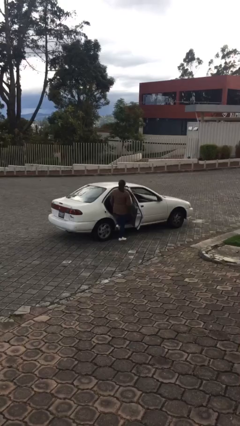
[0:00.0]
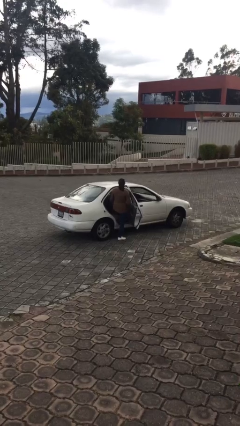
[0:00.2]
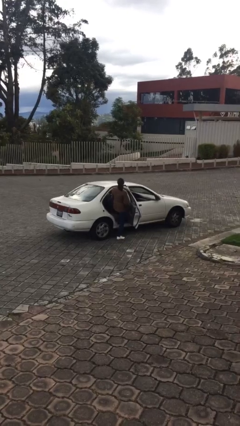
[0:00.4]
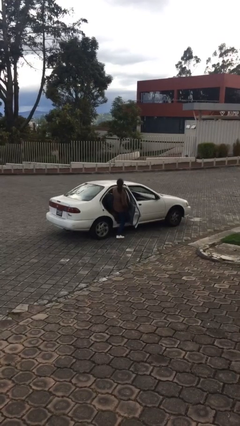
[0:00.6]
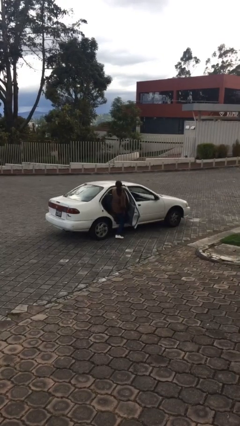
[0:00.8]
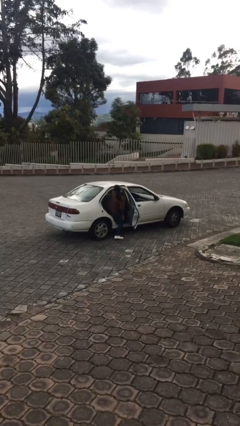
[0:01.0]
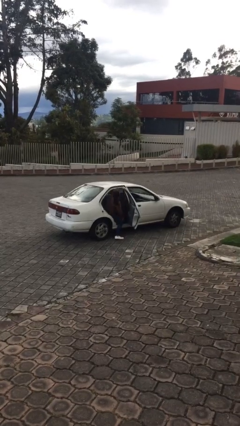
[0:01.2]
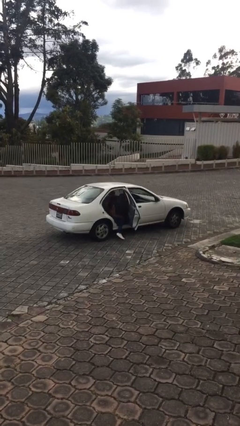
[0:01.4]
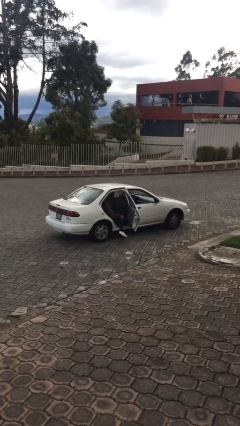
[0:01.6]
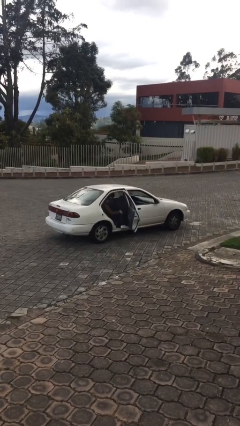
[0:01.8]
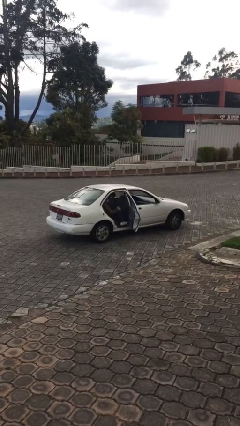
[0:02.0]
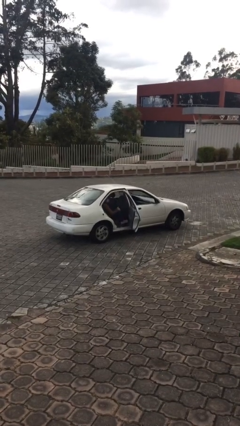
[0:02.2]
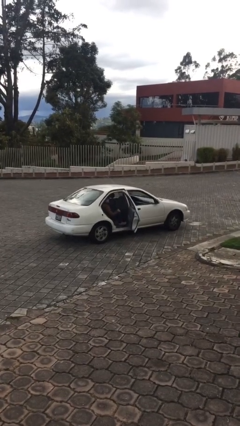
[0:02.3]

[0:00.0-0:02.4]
person enters car

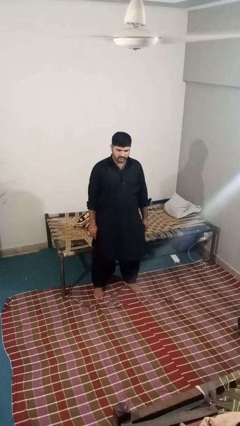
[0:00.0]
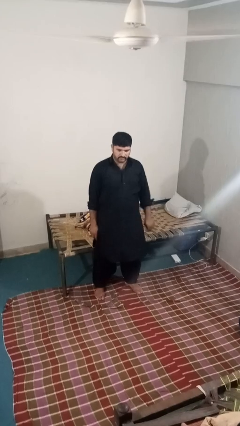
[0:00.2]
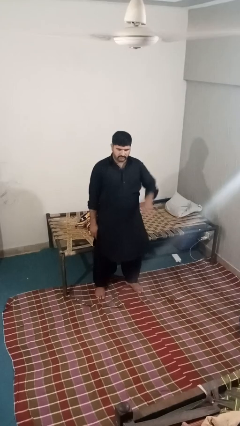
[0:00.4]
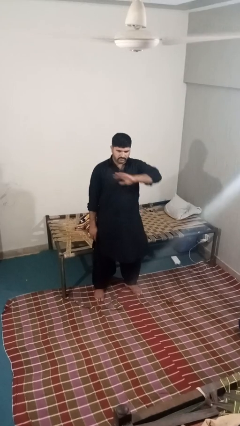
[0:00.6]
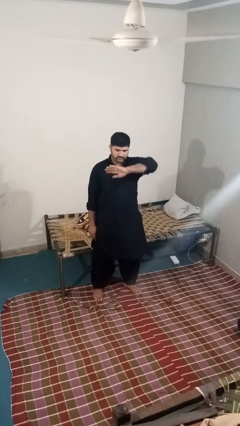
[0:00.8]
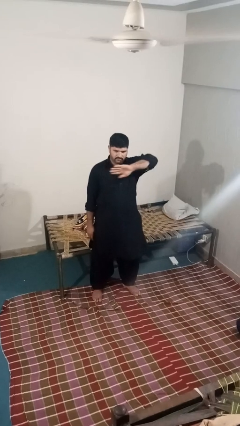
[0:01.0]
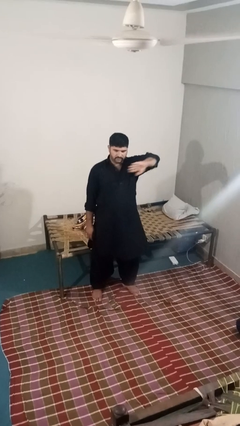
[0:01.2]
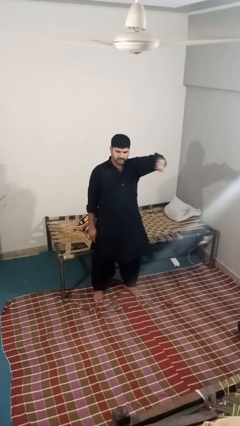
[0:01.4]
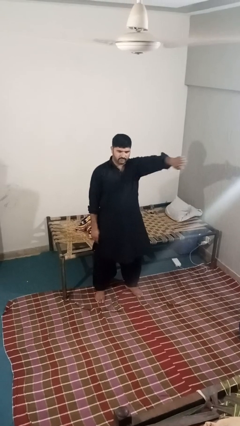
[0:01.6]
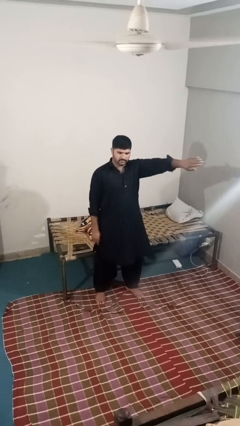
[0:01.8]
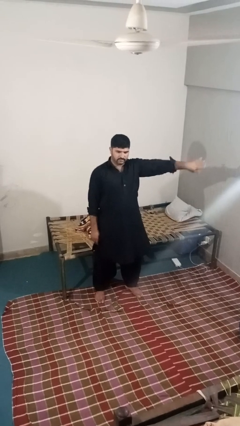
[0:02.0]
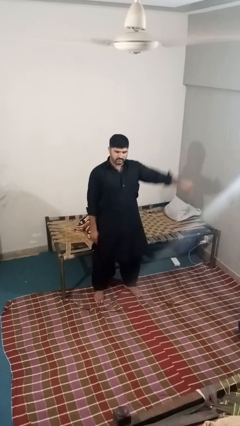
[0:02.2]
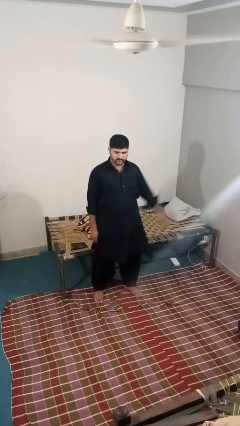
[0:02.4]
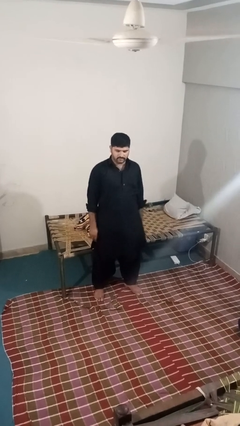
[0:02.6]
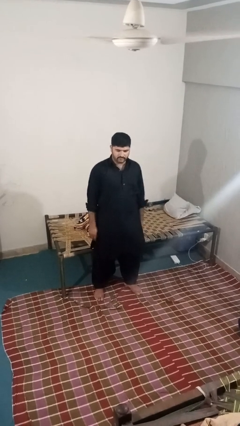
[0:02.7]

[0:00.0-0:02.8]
person gestures swipe left

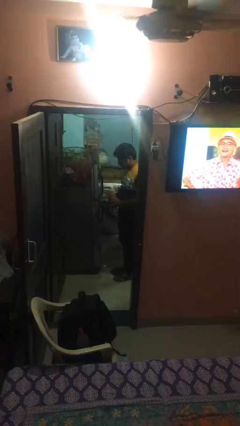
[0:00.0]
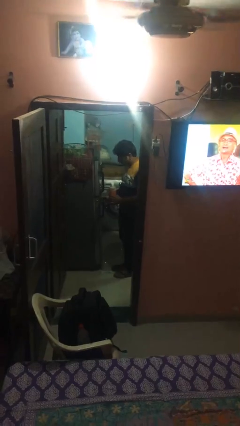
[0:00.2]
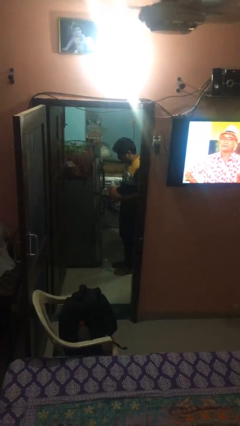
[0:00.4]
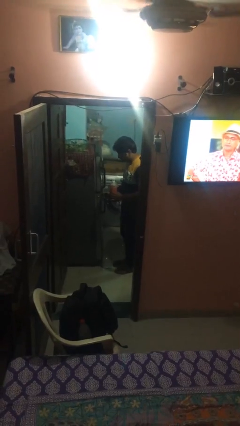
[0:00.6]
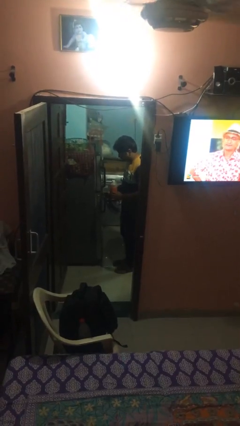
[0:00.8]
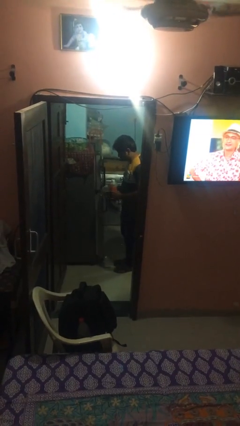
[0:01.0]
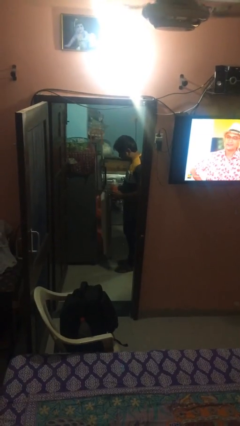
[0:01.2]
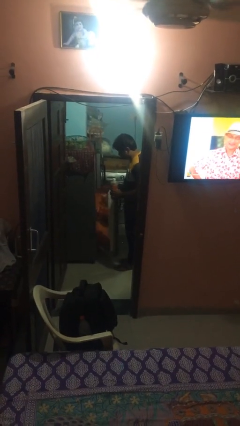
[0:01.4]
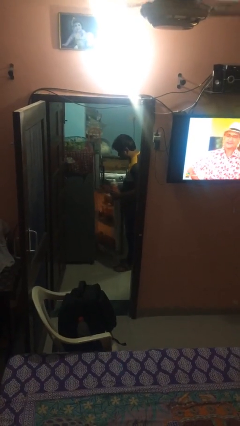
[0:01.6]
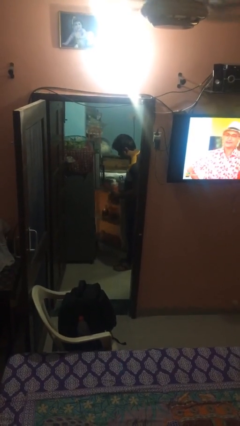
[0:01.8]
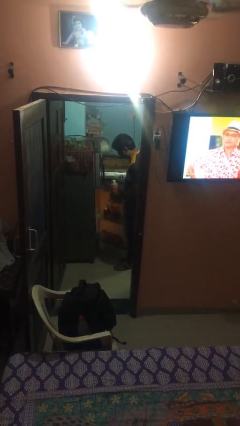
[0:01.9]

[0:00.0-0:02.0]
person opens refrigerator

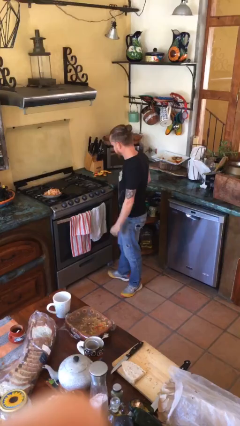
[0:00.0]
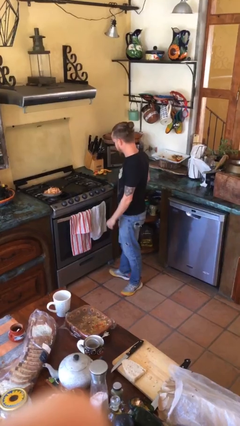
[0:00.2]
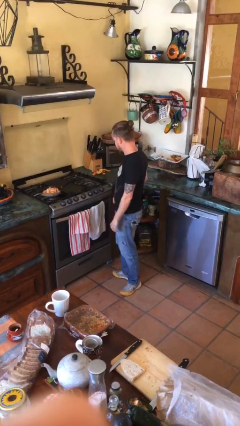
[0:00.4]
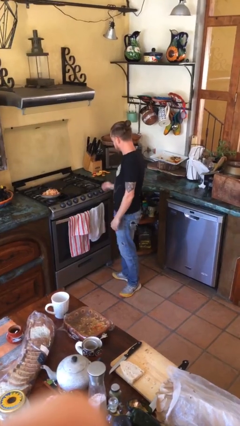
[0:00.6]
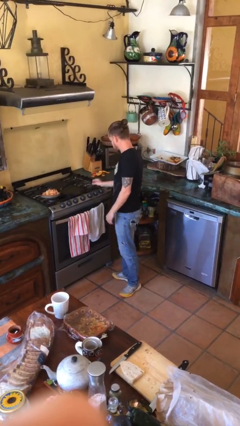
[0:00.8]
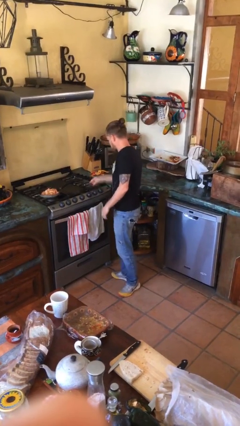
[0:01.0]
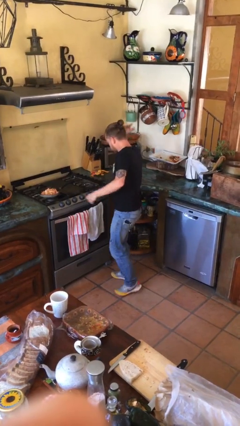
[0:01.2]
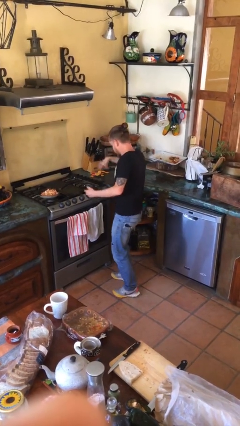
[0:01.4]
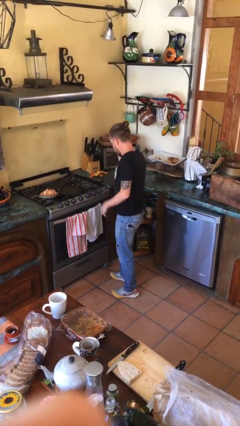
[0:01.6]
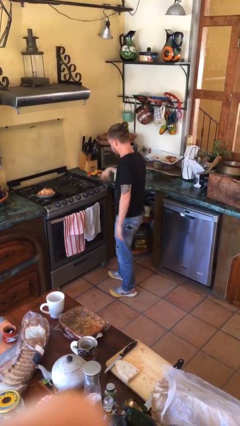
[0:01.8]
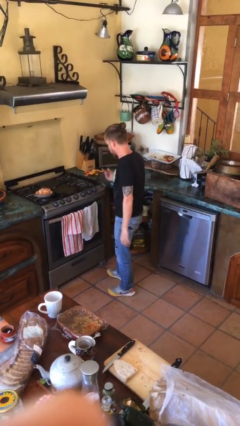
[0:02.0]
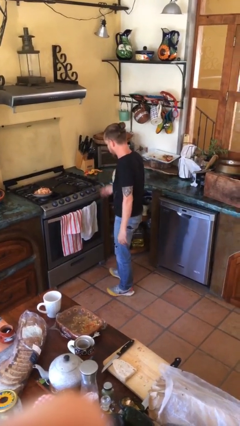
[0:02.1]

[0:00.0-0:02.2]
person burns hand

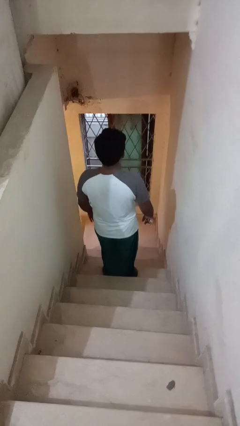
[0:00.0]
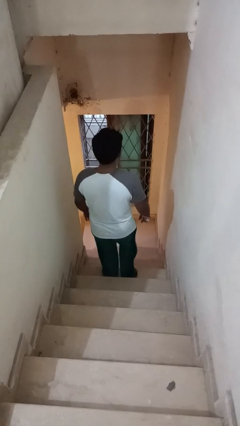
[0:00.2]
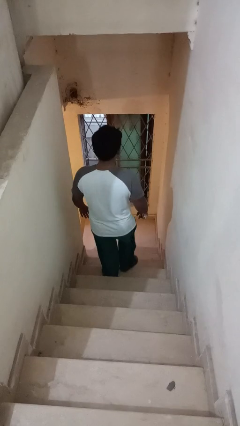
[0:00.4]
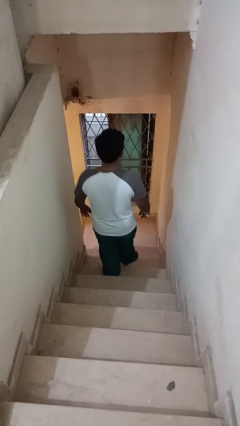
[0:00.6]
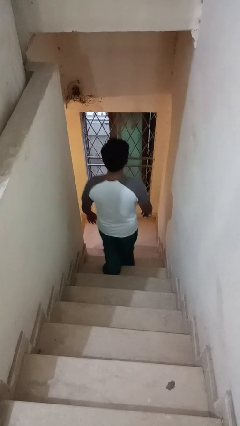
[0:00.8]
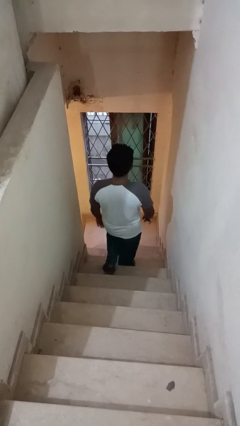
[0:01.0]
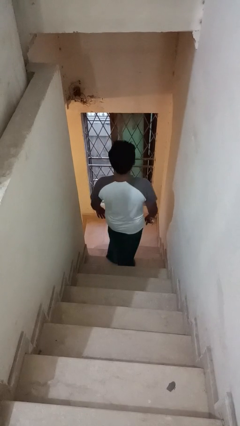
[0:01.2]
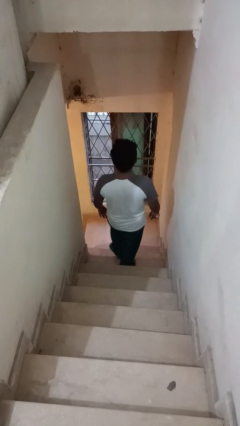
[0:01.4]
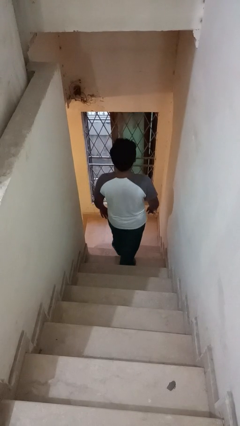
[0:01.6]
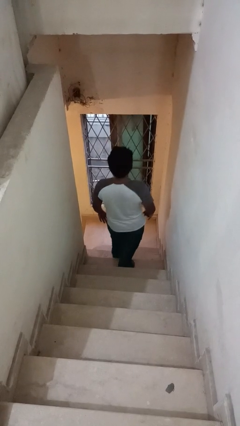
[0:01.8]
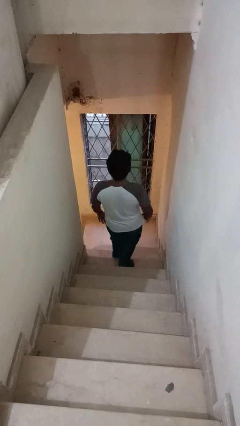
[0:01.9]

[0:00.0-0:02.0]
person climbs down stairs

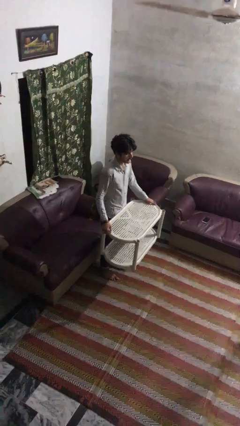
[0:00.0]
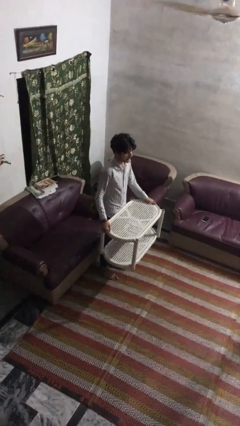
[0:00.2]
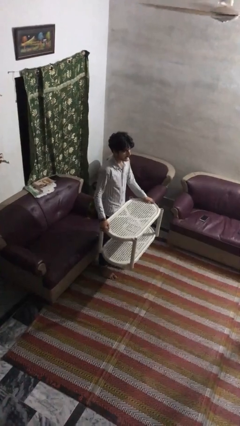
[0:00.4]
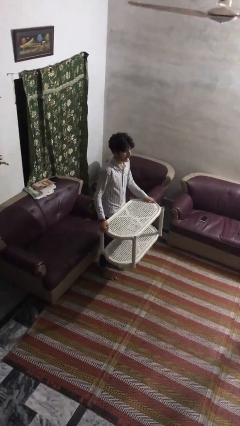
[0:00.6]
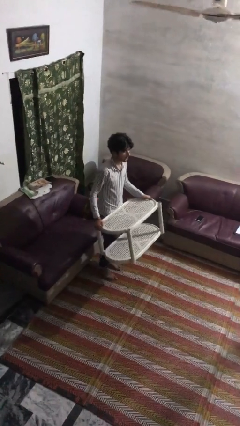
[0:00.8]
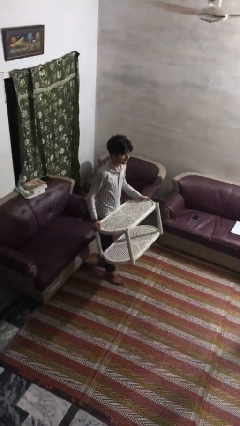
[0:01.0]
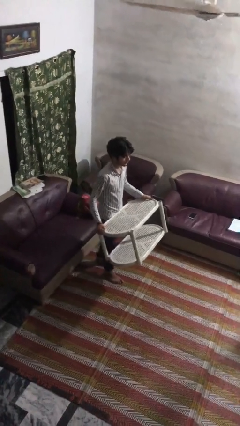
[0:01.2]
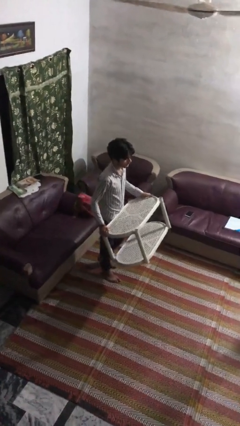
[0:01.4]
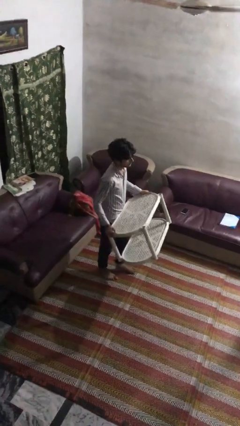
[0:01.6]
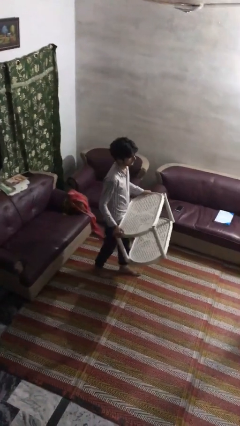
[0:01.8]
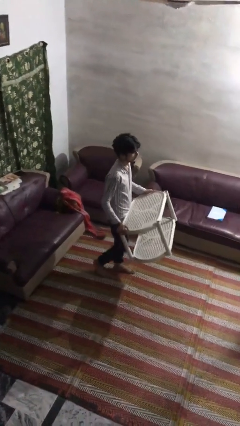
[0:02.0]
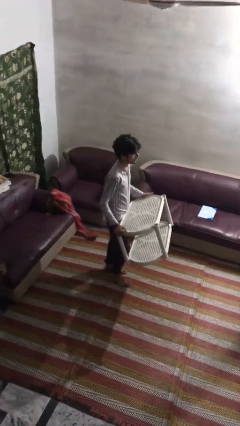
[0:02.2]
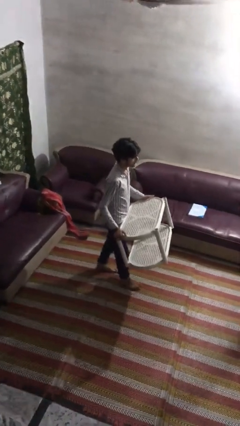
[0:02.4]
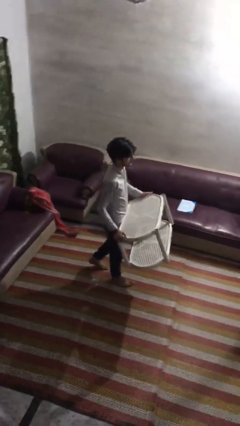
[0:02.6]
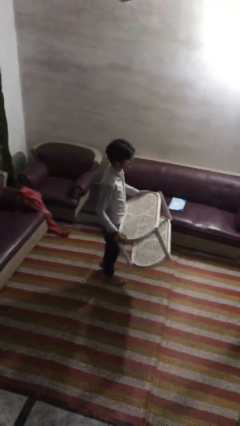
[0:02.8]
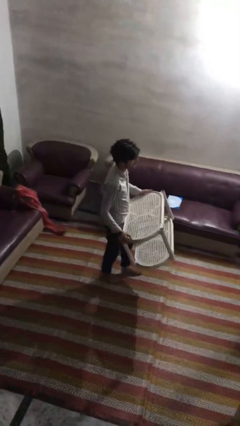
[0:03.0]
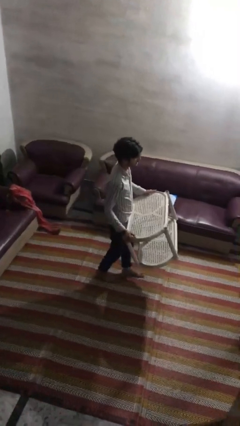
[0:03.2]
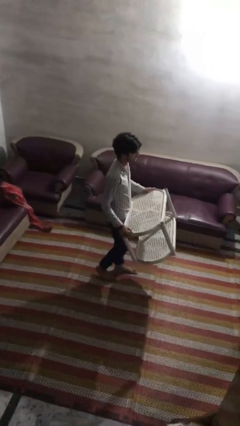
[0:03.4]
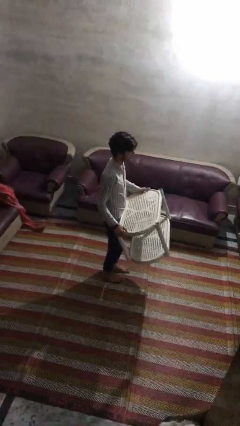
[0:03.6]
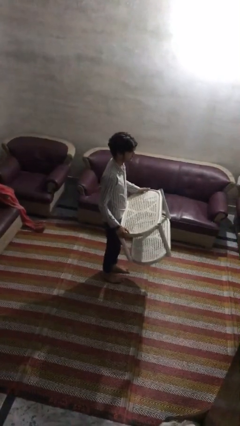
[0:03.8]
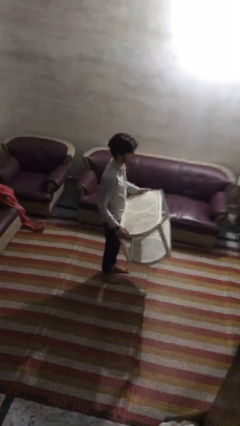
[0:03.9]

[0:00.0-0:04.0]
person carries furniture

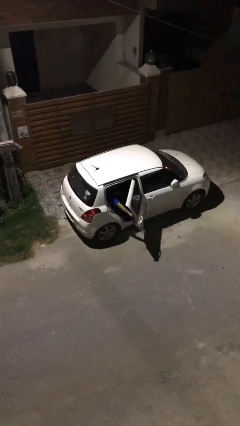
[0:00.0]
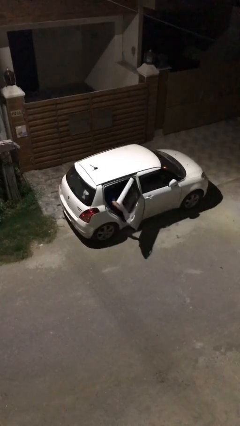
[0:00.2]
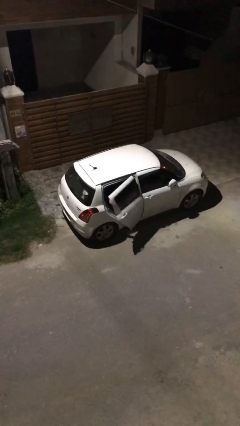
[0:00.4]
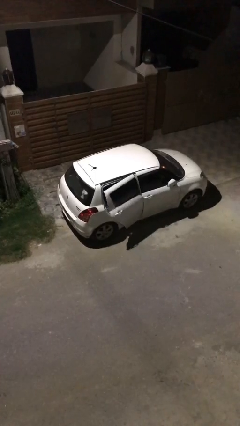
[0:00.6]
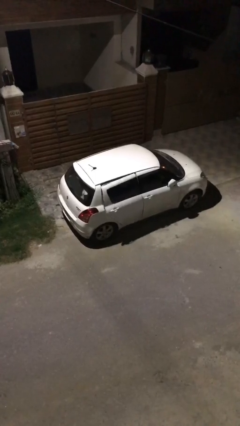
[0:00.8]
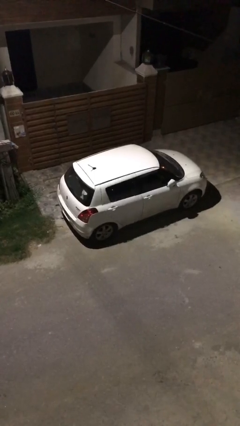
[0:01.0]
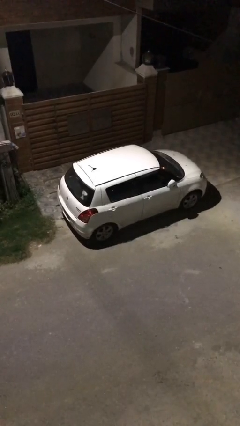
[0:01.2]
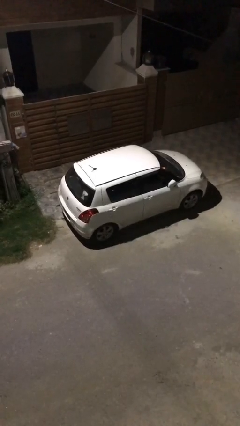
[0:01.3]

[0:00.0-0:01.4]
person closes car door
